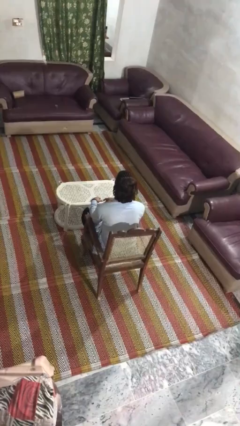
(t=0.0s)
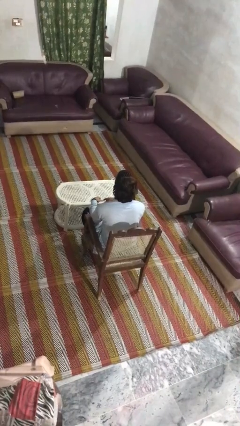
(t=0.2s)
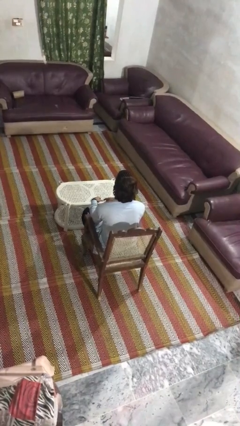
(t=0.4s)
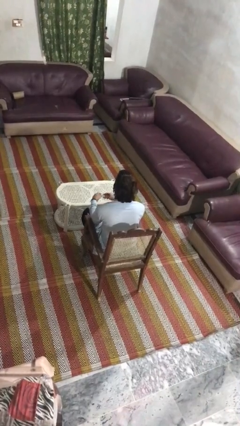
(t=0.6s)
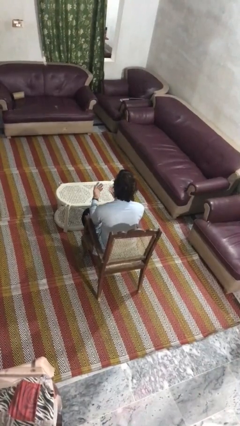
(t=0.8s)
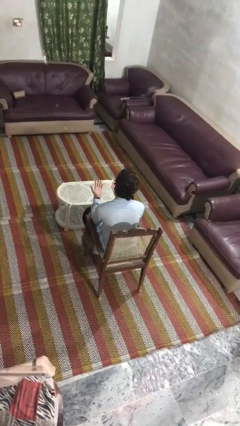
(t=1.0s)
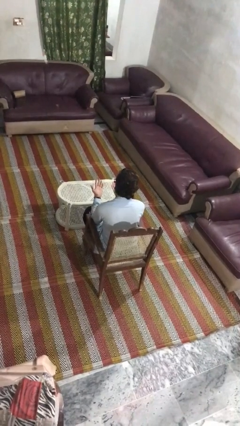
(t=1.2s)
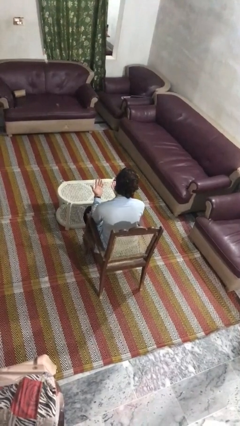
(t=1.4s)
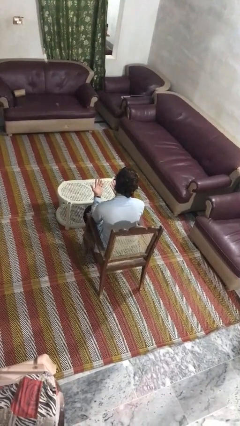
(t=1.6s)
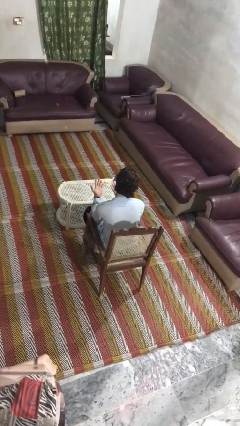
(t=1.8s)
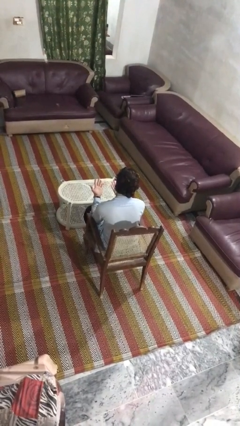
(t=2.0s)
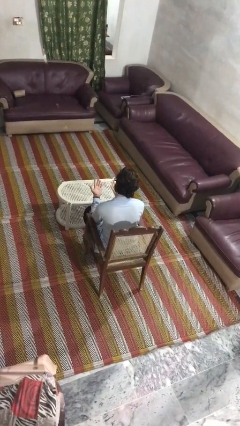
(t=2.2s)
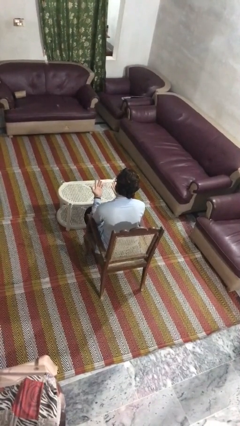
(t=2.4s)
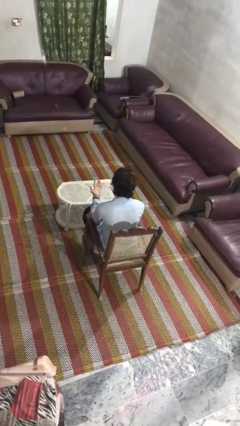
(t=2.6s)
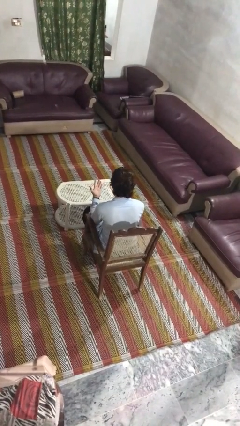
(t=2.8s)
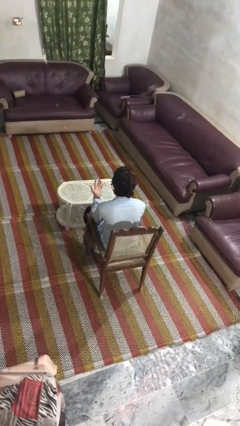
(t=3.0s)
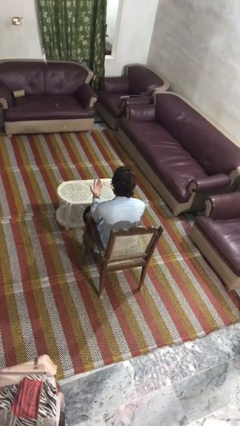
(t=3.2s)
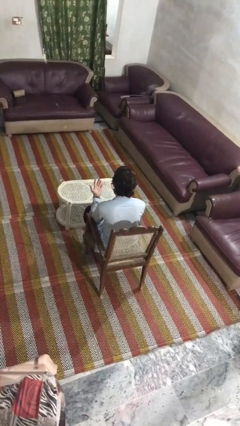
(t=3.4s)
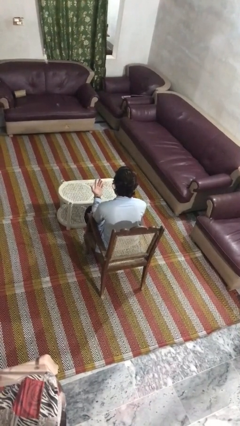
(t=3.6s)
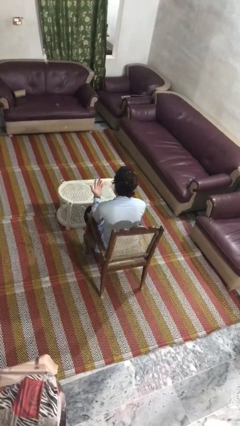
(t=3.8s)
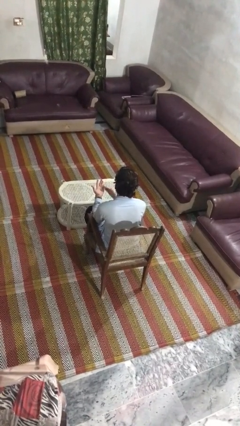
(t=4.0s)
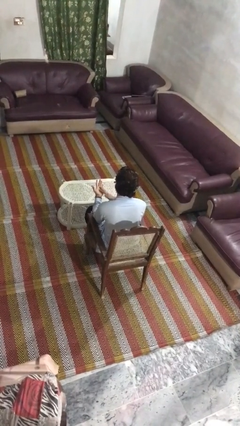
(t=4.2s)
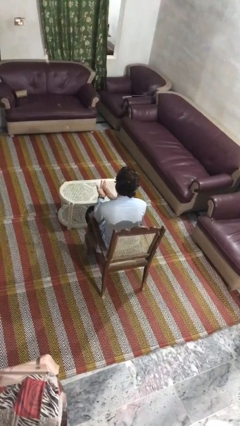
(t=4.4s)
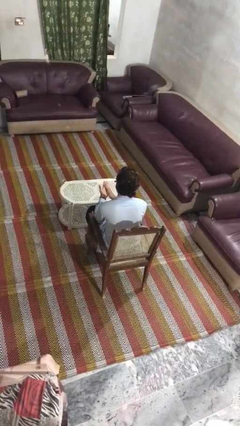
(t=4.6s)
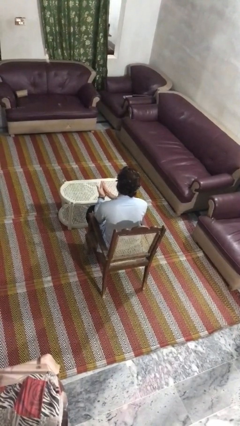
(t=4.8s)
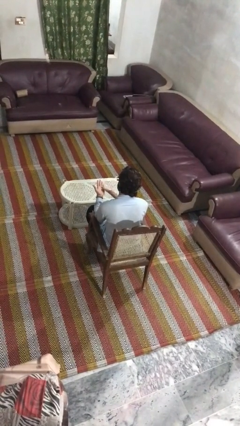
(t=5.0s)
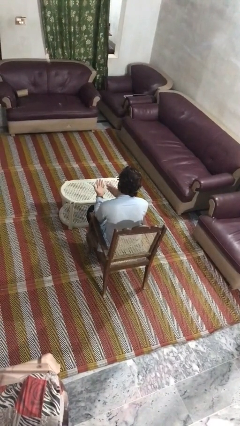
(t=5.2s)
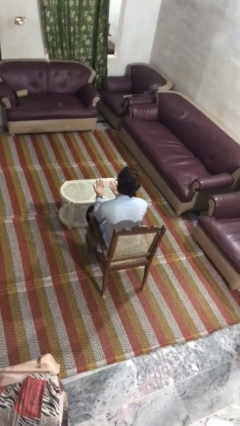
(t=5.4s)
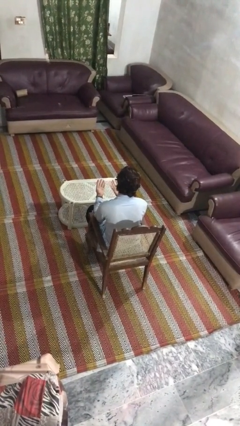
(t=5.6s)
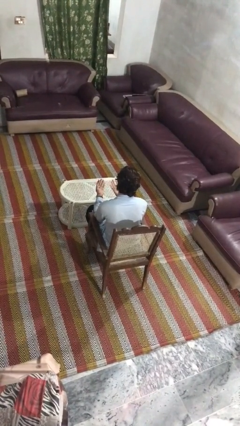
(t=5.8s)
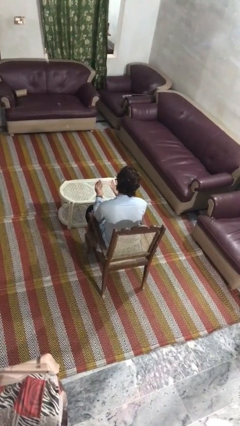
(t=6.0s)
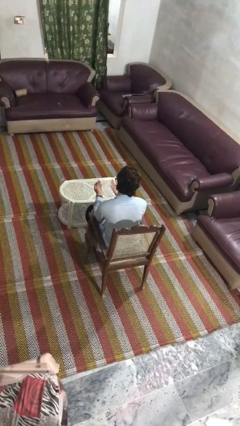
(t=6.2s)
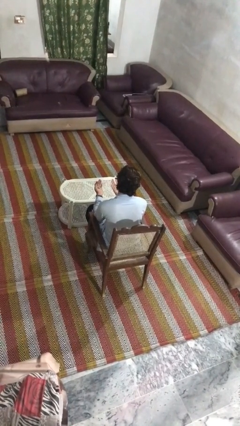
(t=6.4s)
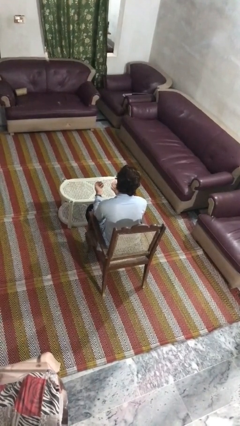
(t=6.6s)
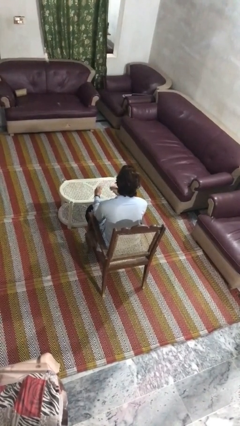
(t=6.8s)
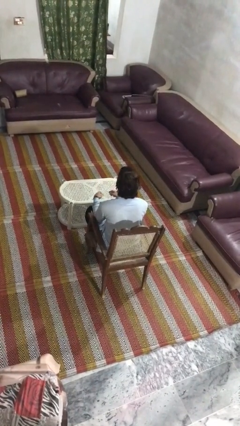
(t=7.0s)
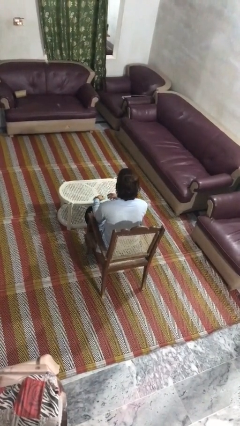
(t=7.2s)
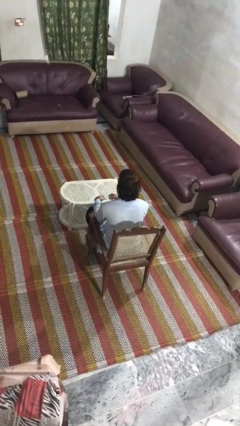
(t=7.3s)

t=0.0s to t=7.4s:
person looks at hands in lap

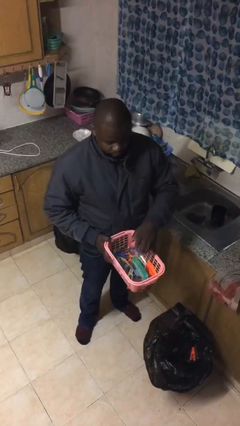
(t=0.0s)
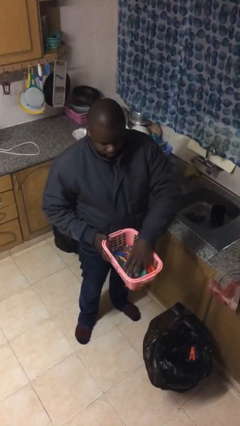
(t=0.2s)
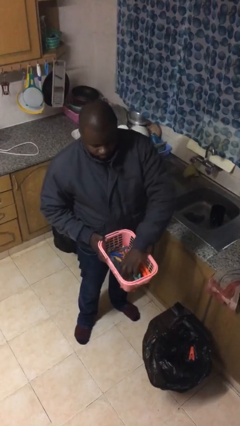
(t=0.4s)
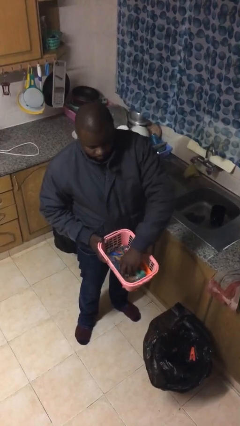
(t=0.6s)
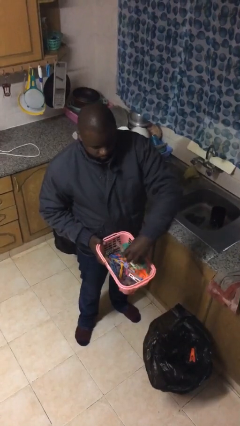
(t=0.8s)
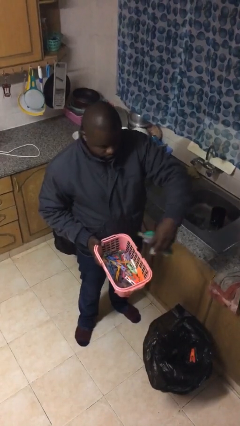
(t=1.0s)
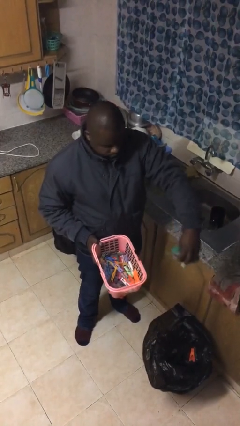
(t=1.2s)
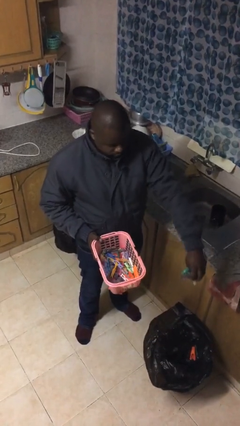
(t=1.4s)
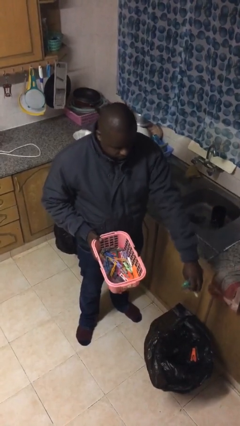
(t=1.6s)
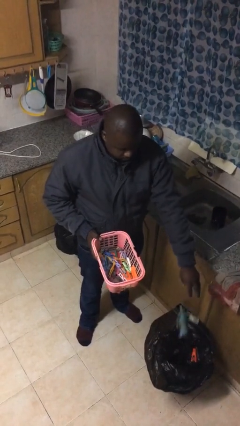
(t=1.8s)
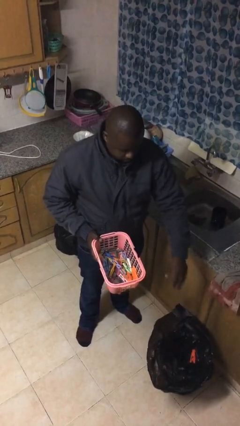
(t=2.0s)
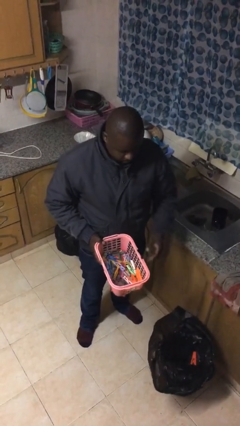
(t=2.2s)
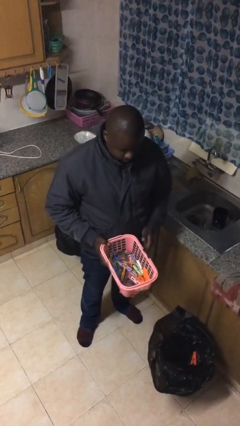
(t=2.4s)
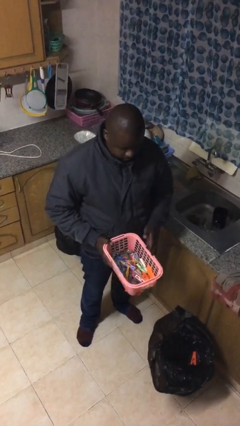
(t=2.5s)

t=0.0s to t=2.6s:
person discards trash

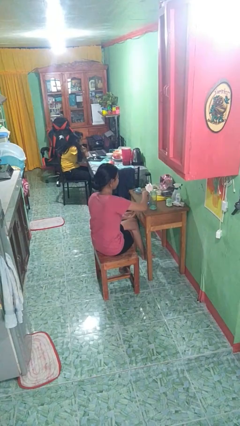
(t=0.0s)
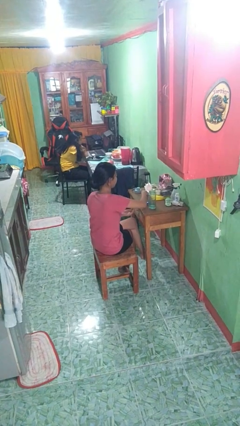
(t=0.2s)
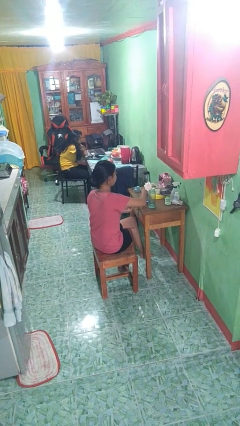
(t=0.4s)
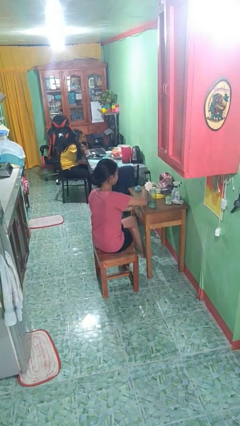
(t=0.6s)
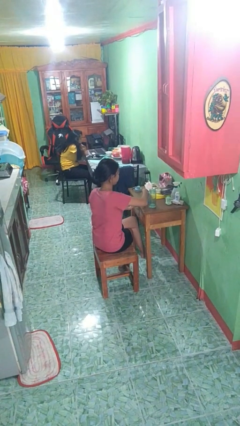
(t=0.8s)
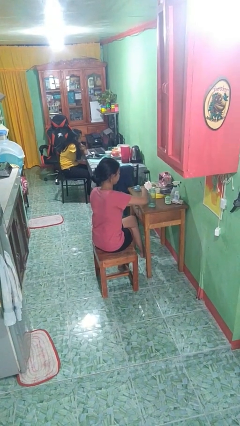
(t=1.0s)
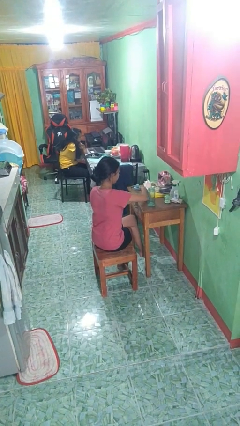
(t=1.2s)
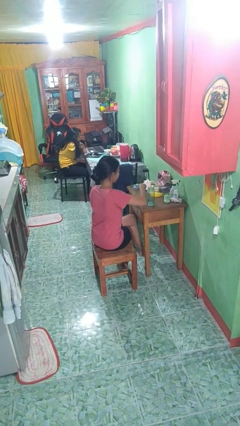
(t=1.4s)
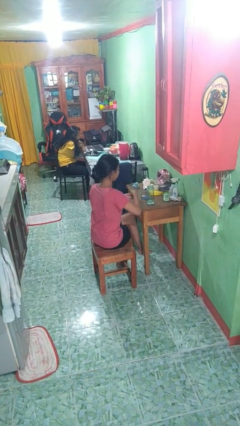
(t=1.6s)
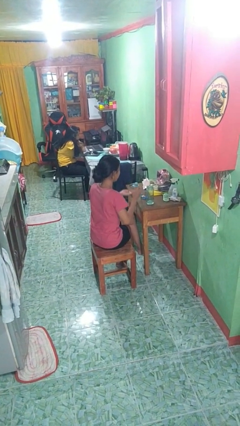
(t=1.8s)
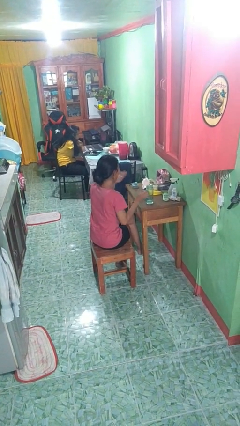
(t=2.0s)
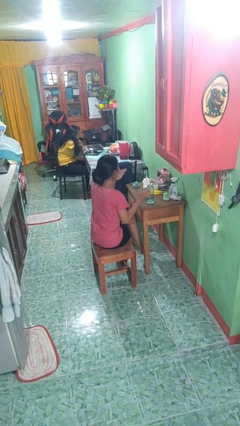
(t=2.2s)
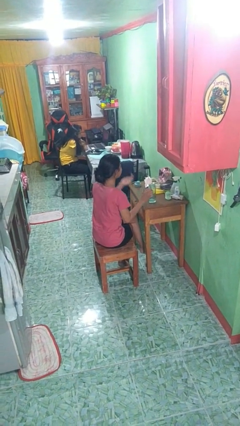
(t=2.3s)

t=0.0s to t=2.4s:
person takes medicine pills

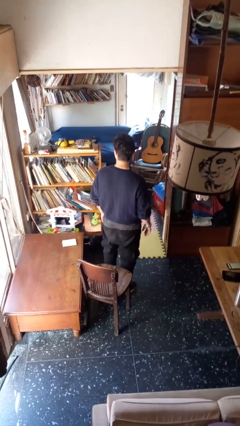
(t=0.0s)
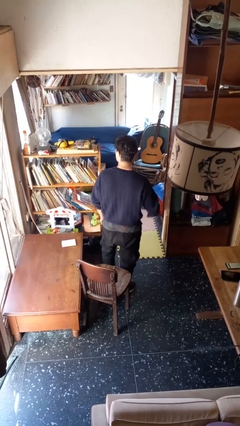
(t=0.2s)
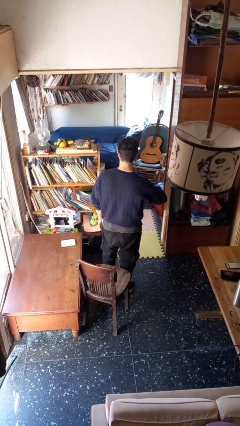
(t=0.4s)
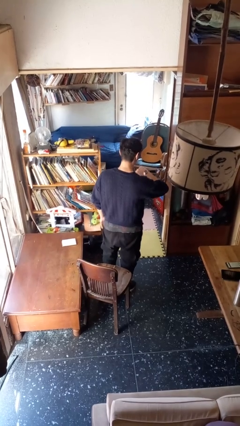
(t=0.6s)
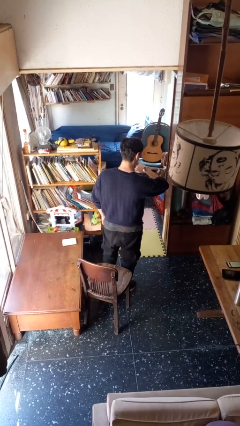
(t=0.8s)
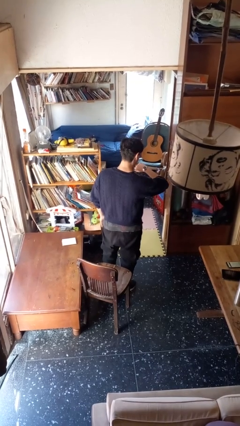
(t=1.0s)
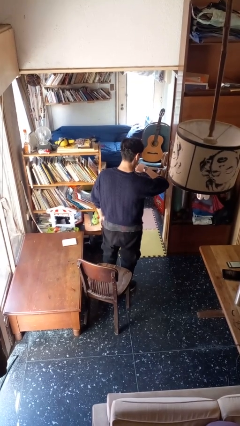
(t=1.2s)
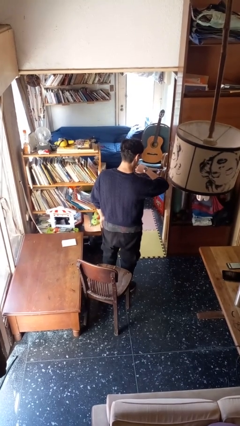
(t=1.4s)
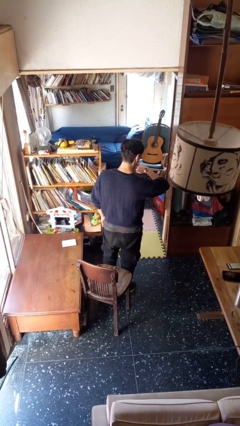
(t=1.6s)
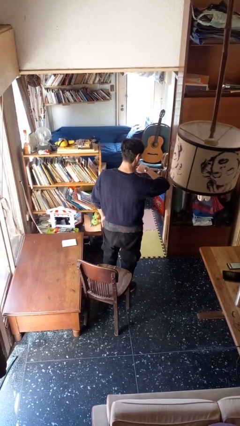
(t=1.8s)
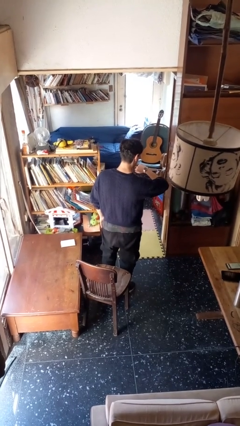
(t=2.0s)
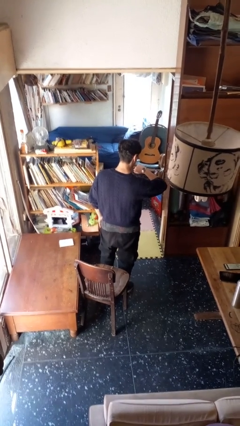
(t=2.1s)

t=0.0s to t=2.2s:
person looks at wristwatch

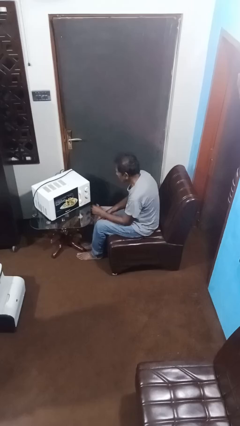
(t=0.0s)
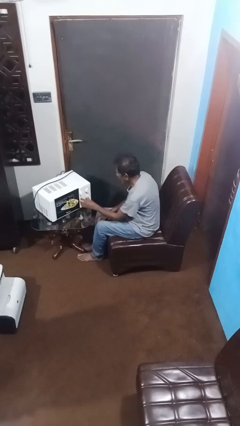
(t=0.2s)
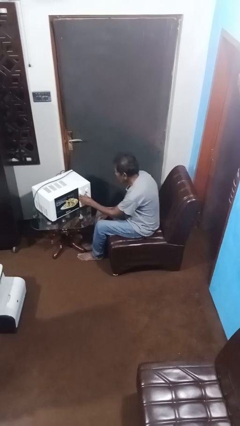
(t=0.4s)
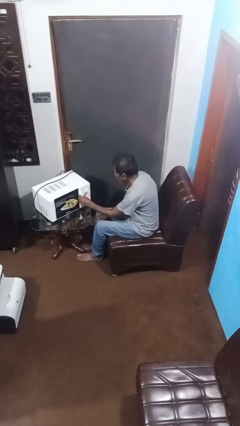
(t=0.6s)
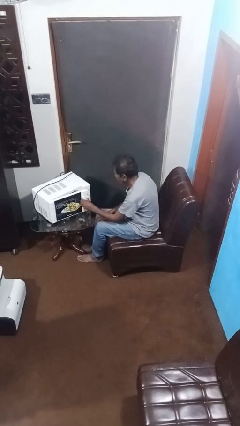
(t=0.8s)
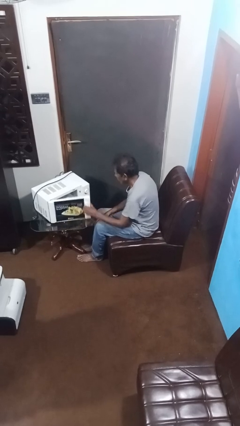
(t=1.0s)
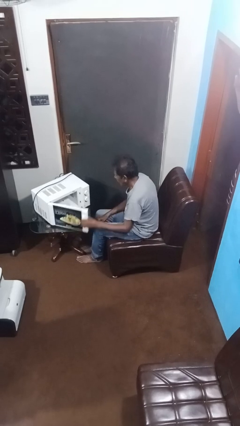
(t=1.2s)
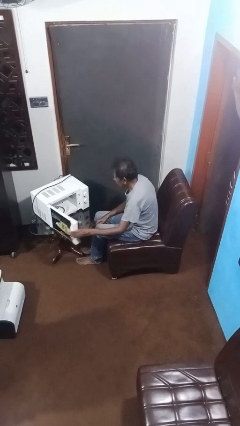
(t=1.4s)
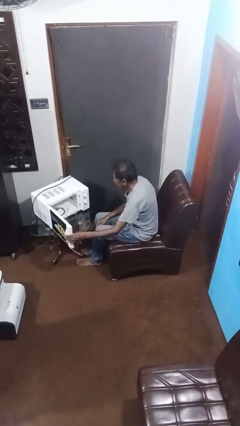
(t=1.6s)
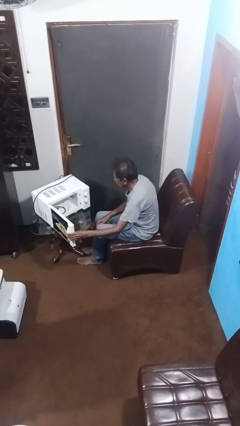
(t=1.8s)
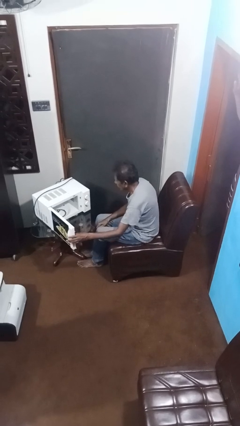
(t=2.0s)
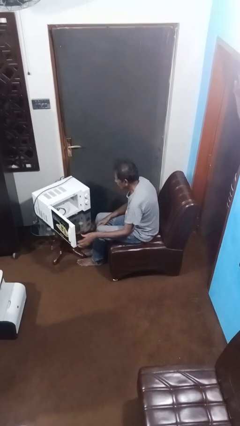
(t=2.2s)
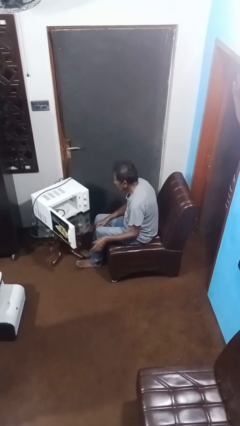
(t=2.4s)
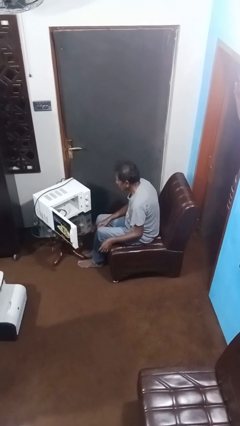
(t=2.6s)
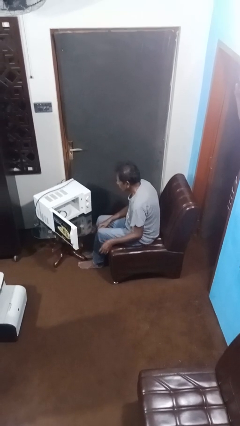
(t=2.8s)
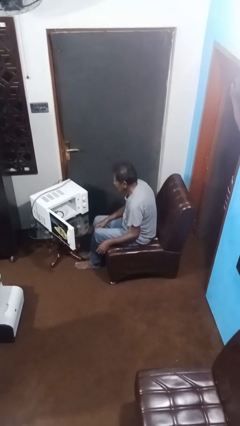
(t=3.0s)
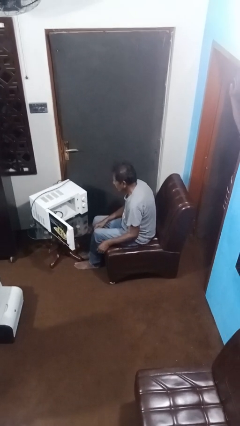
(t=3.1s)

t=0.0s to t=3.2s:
person opens microwave
